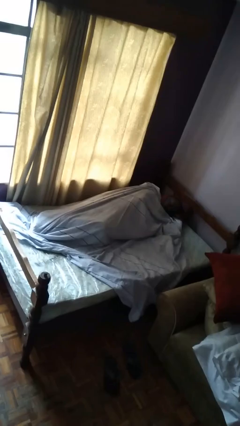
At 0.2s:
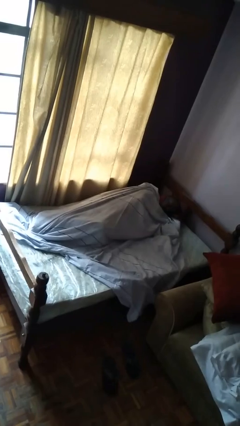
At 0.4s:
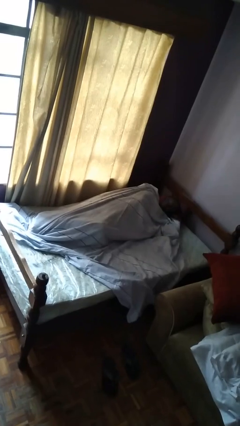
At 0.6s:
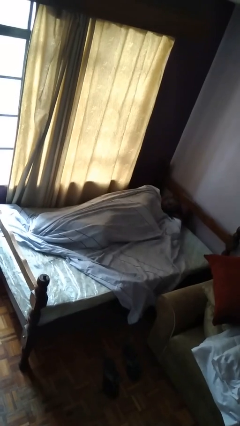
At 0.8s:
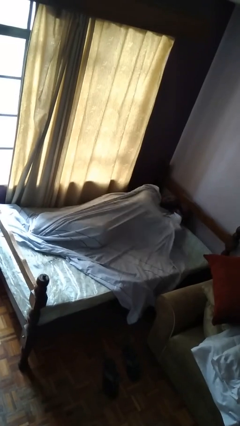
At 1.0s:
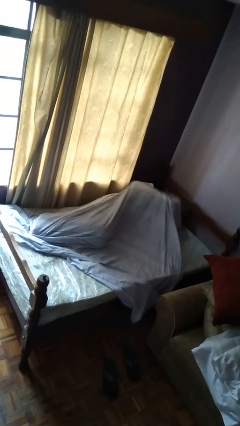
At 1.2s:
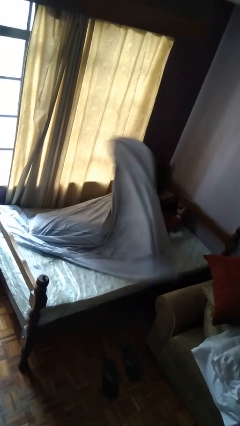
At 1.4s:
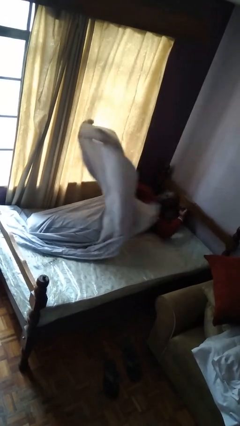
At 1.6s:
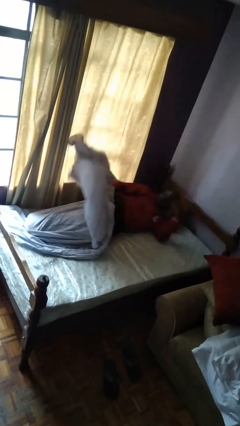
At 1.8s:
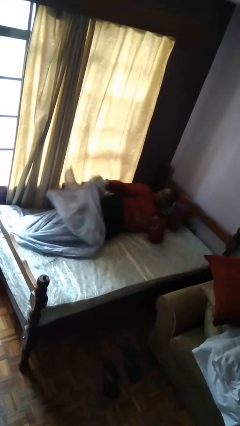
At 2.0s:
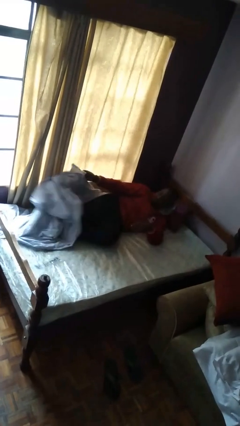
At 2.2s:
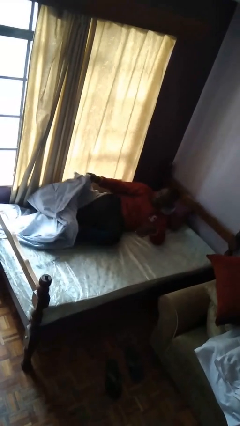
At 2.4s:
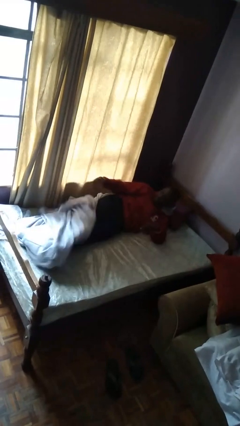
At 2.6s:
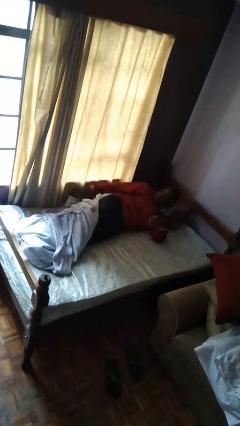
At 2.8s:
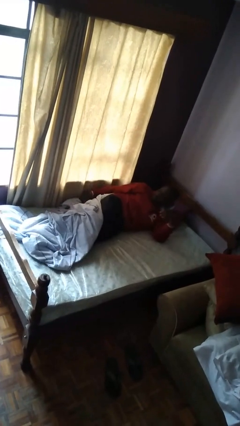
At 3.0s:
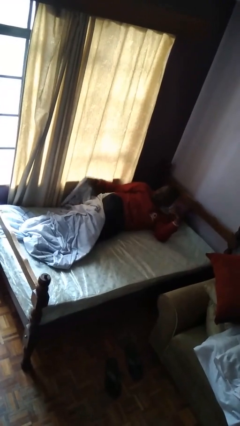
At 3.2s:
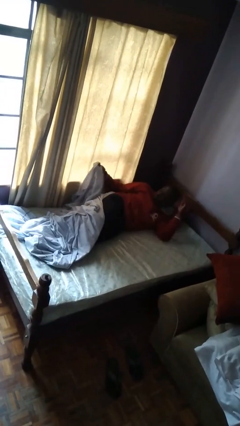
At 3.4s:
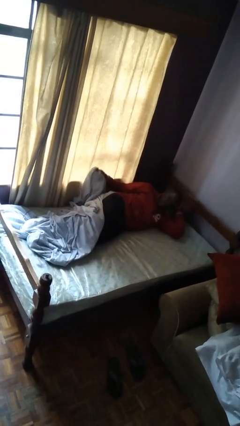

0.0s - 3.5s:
person uncovers with bedsheets

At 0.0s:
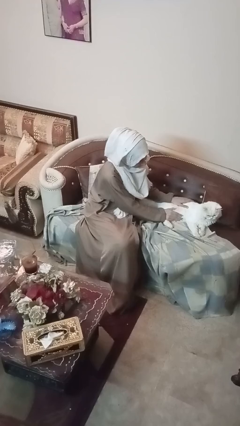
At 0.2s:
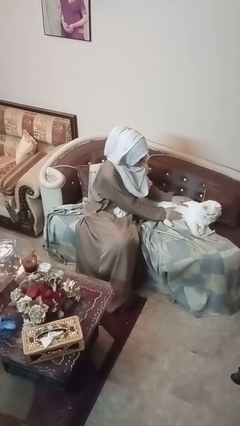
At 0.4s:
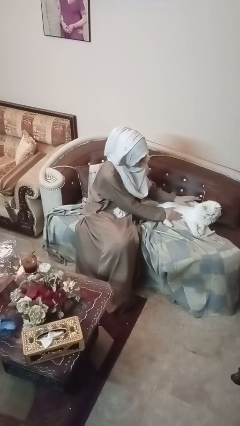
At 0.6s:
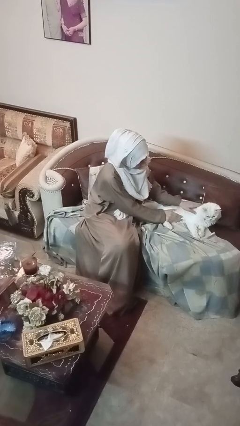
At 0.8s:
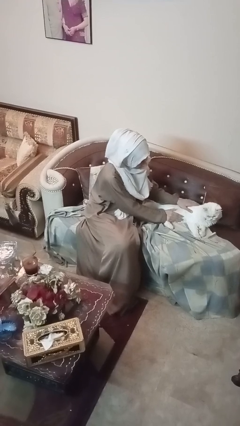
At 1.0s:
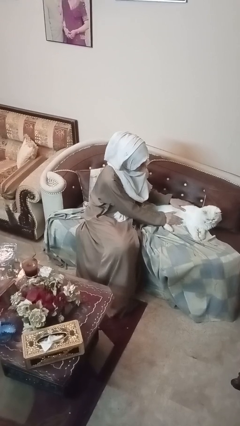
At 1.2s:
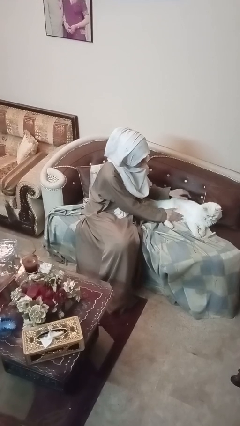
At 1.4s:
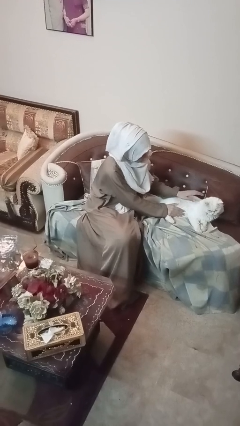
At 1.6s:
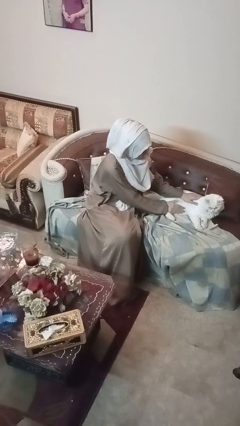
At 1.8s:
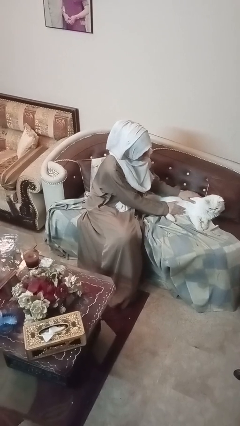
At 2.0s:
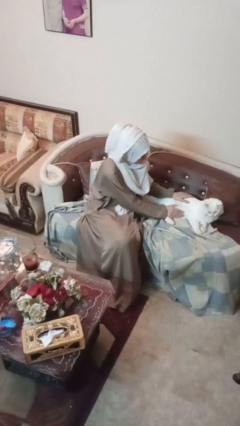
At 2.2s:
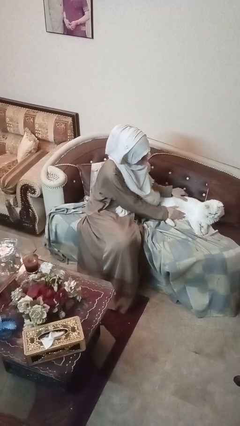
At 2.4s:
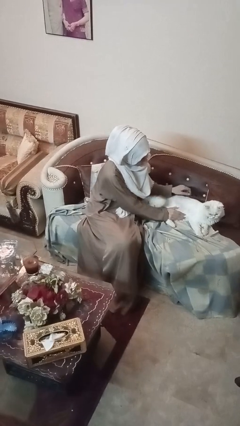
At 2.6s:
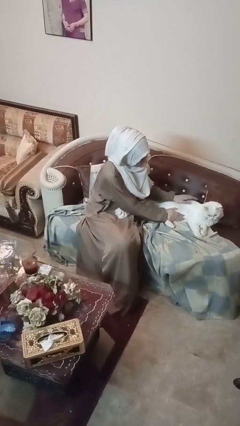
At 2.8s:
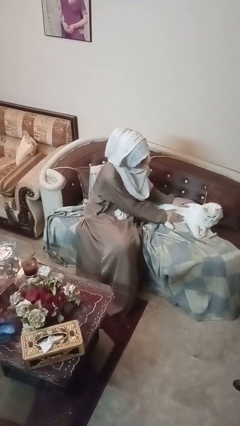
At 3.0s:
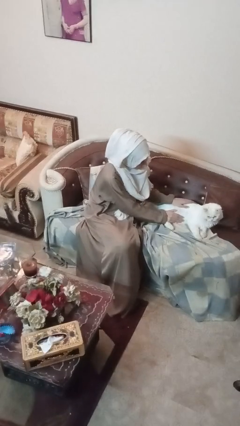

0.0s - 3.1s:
person pets cat

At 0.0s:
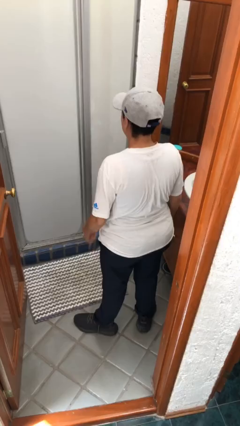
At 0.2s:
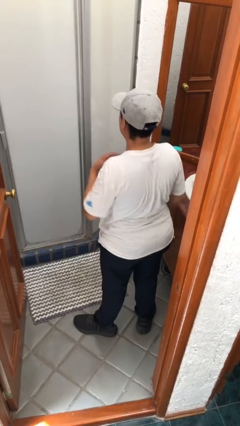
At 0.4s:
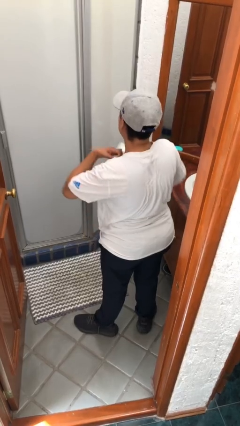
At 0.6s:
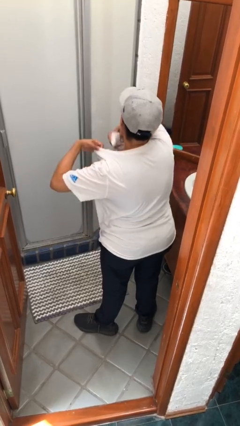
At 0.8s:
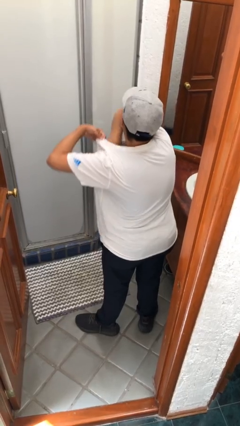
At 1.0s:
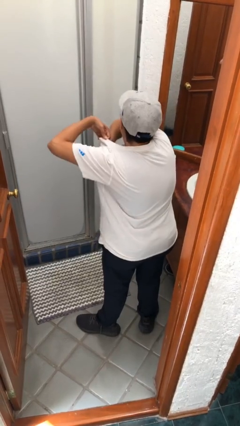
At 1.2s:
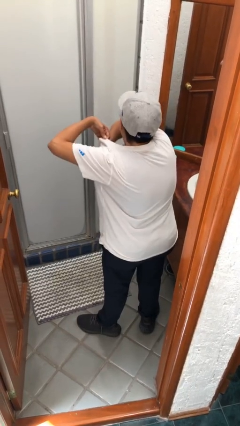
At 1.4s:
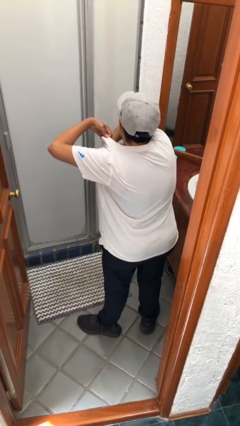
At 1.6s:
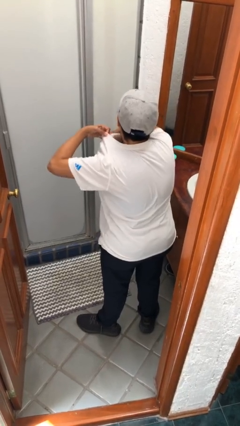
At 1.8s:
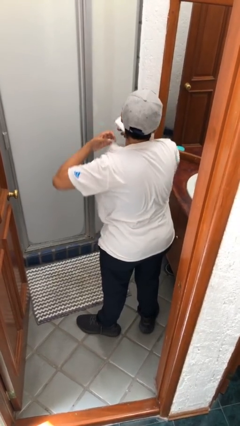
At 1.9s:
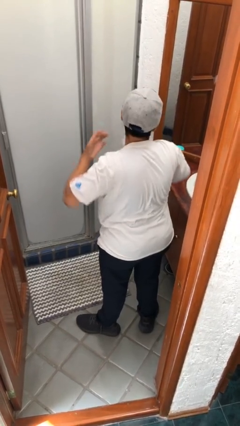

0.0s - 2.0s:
person applies deodorant

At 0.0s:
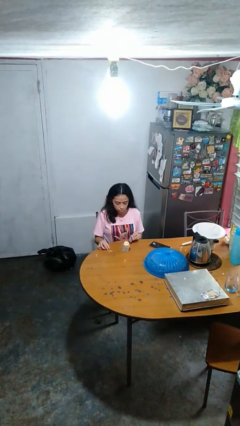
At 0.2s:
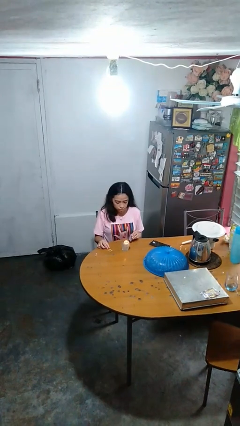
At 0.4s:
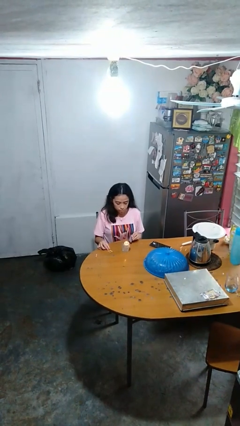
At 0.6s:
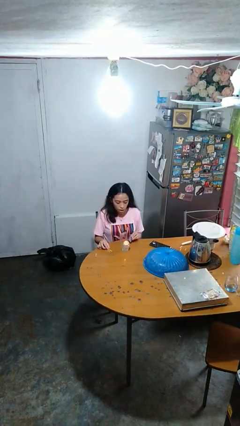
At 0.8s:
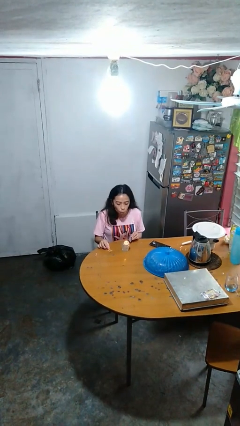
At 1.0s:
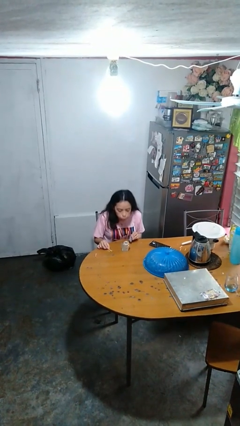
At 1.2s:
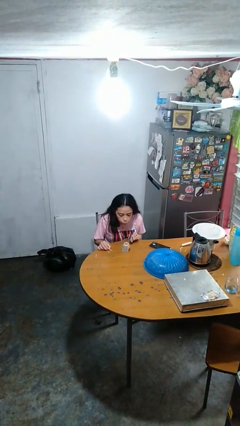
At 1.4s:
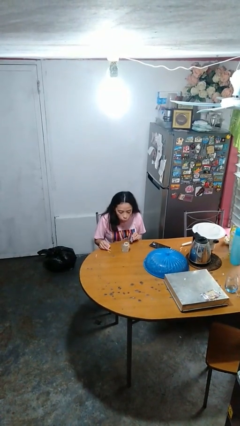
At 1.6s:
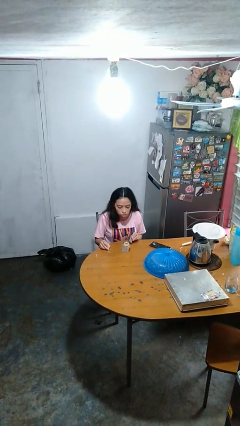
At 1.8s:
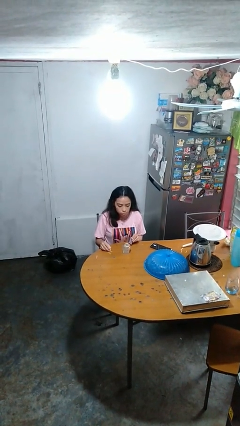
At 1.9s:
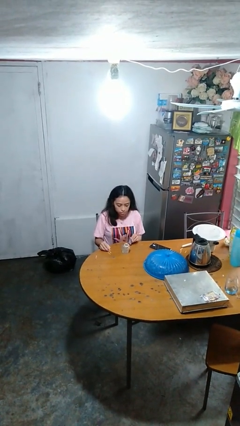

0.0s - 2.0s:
person extinguishes candle

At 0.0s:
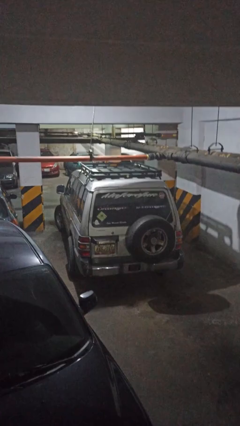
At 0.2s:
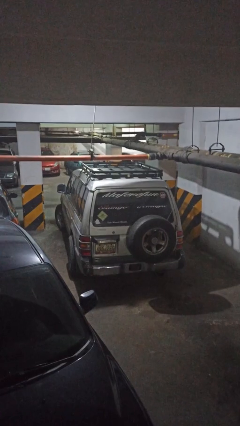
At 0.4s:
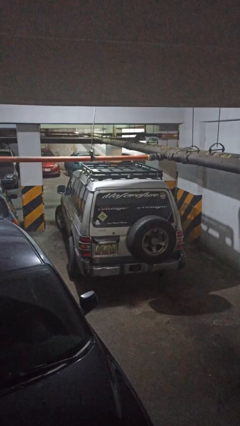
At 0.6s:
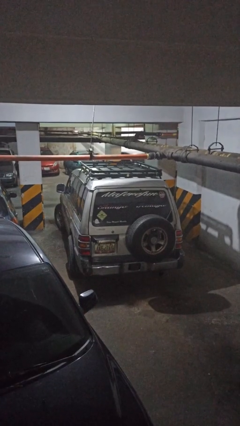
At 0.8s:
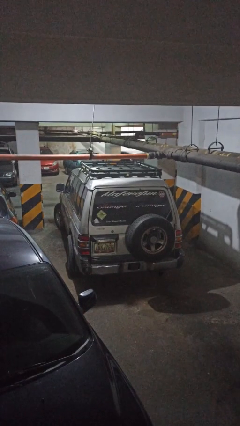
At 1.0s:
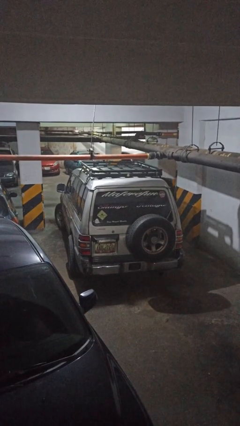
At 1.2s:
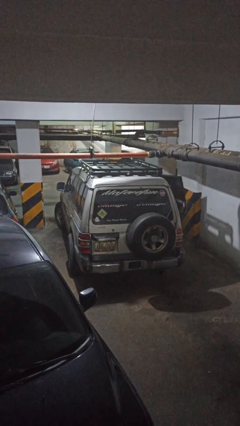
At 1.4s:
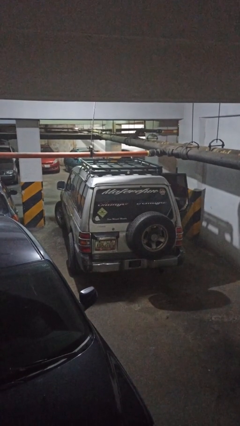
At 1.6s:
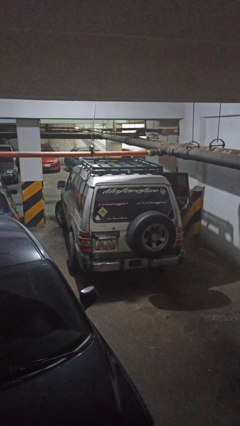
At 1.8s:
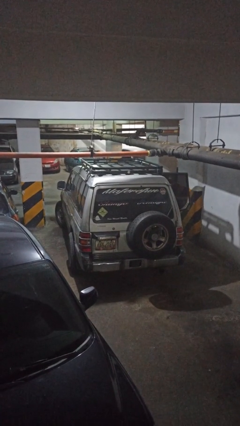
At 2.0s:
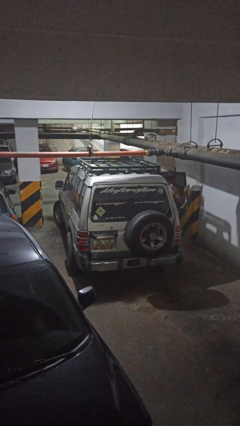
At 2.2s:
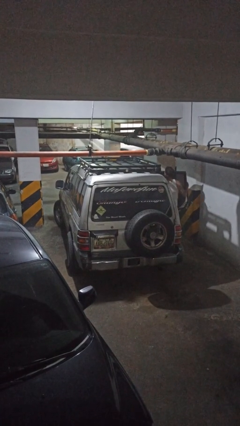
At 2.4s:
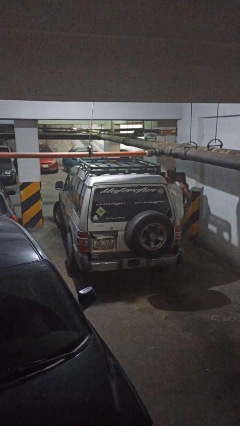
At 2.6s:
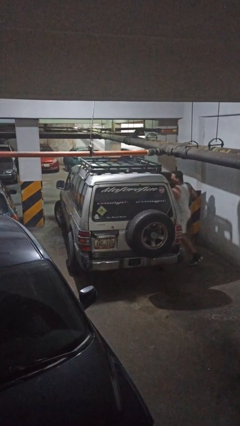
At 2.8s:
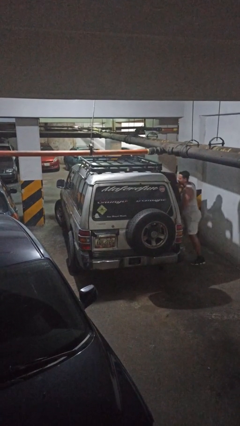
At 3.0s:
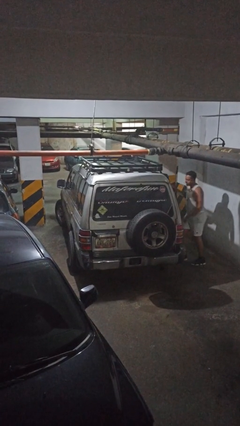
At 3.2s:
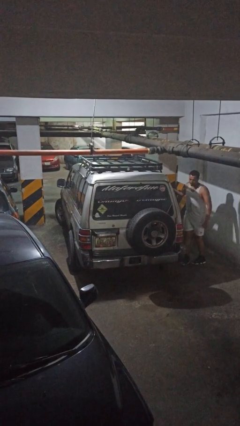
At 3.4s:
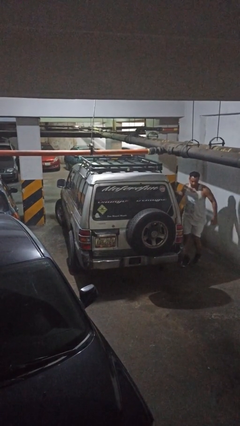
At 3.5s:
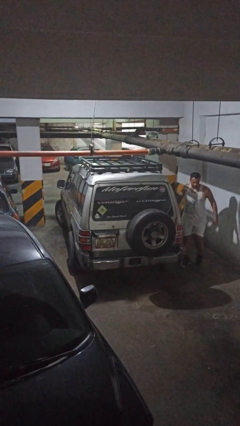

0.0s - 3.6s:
car drops off person

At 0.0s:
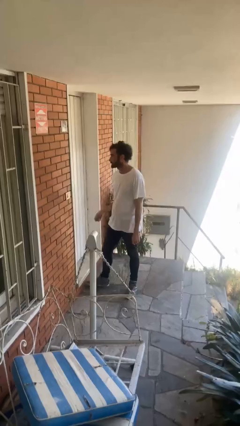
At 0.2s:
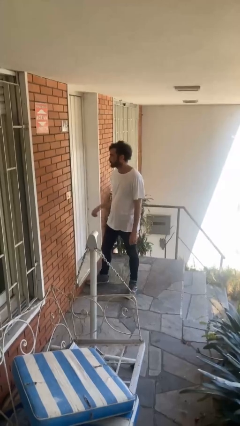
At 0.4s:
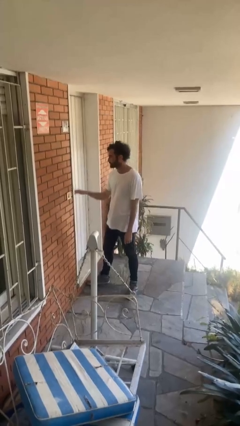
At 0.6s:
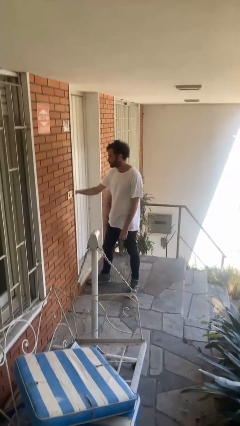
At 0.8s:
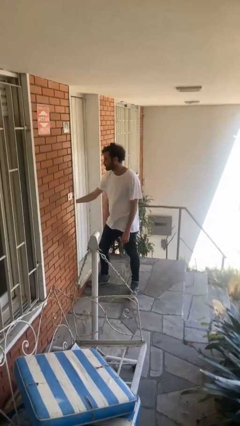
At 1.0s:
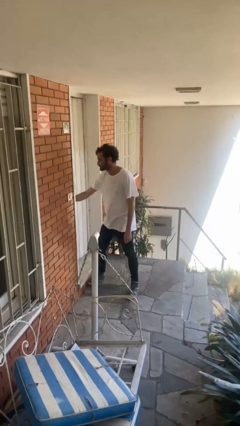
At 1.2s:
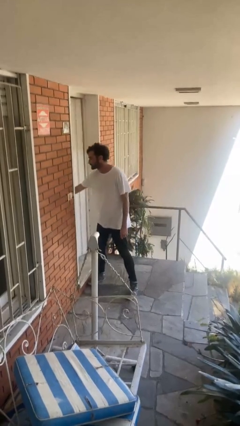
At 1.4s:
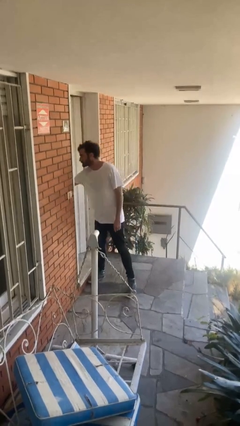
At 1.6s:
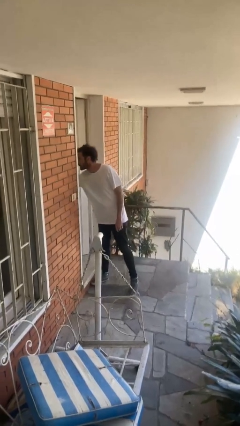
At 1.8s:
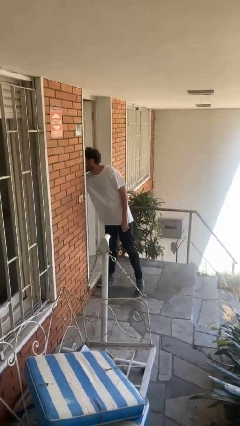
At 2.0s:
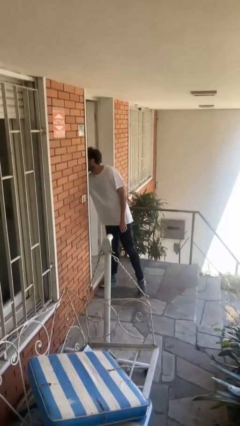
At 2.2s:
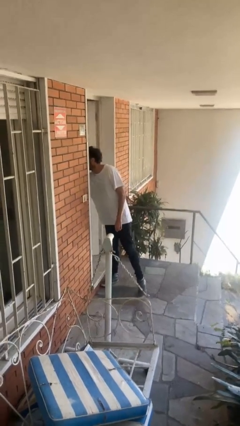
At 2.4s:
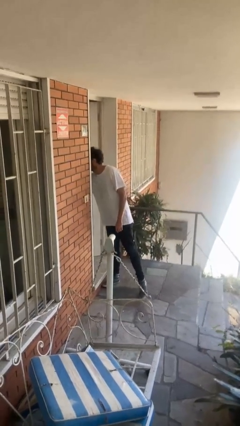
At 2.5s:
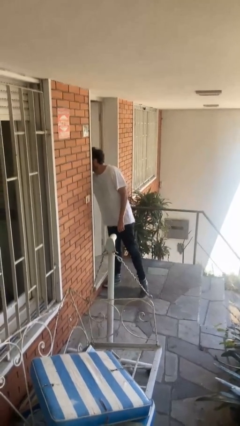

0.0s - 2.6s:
person opens facility door

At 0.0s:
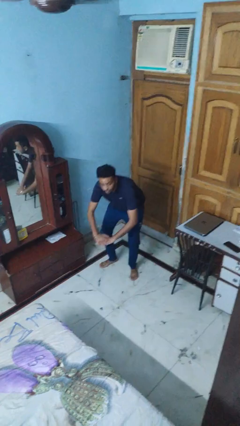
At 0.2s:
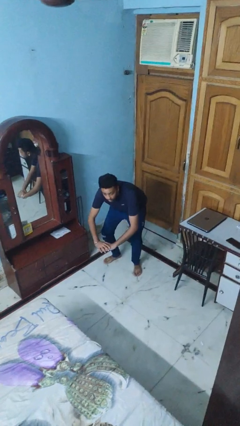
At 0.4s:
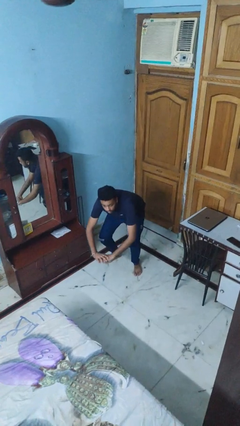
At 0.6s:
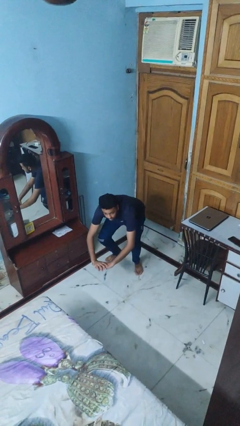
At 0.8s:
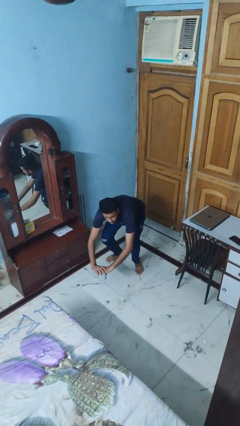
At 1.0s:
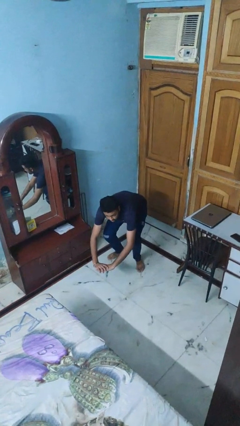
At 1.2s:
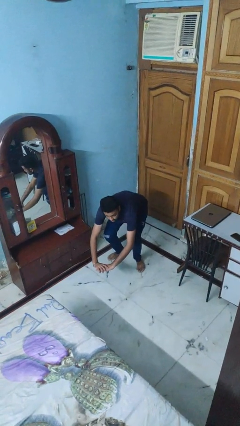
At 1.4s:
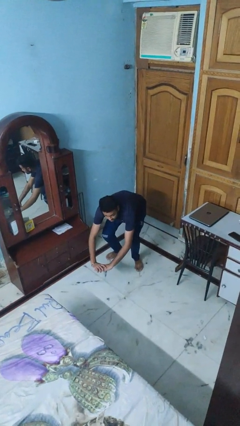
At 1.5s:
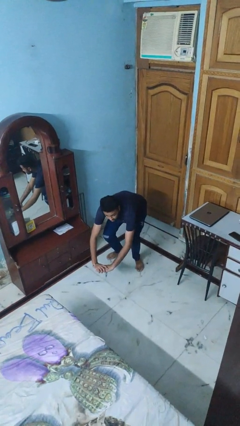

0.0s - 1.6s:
person squats
